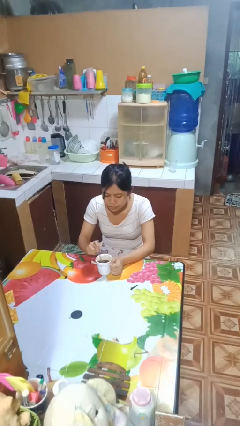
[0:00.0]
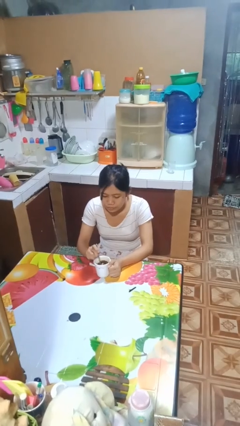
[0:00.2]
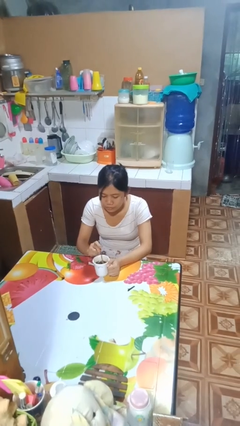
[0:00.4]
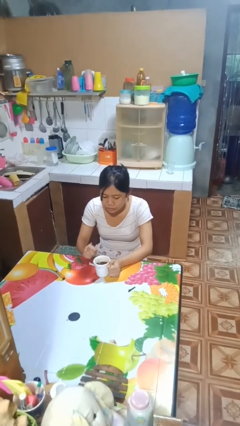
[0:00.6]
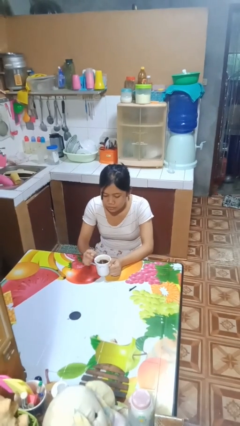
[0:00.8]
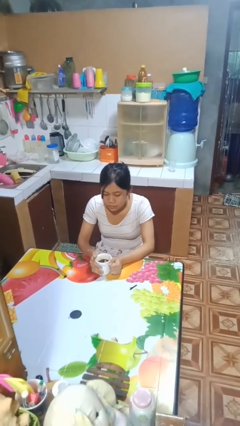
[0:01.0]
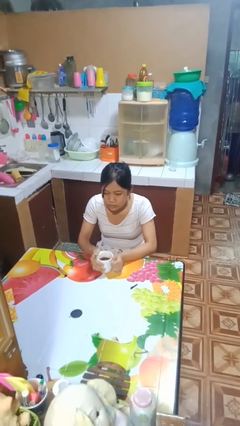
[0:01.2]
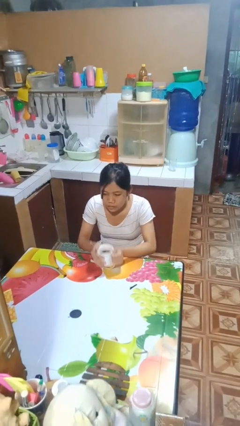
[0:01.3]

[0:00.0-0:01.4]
person stirs mug

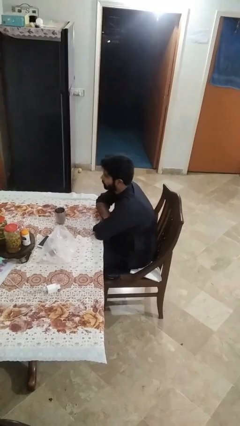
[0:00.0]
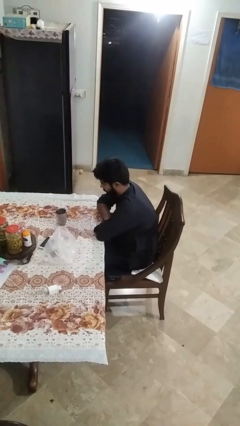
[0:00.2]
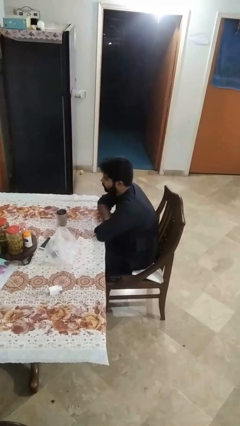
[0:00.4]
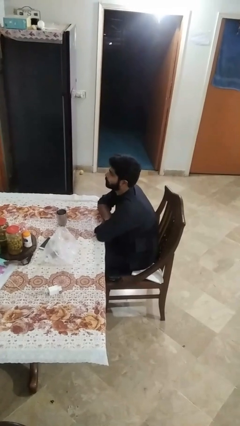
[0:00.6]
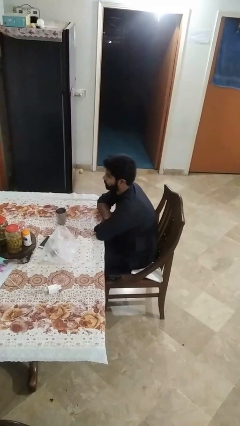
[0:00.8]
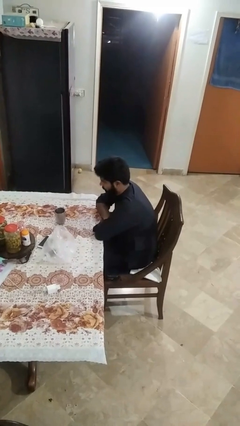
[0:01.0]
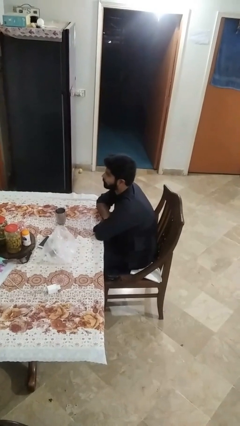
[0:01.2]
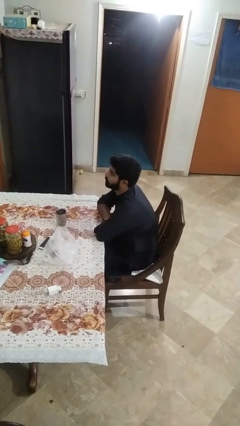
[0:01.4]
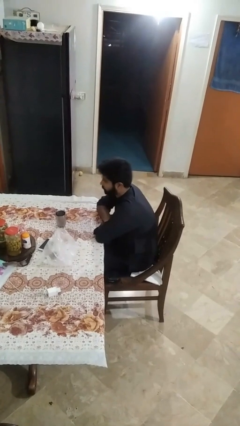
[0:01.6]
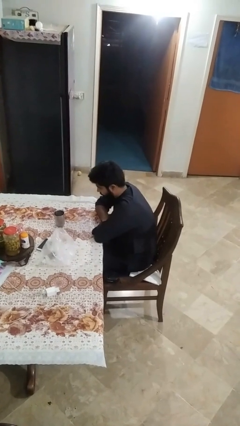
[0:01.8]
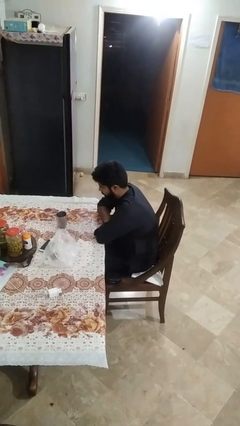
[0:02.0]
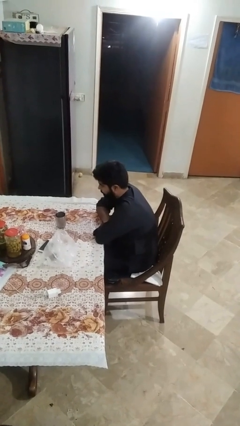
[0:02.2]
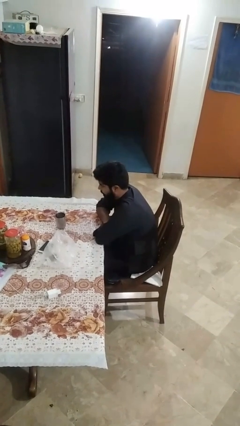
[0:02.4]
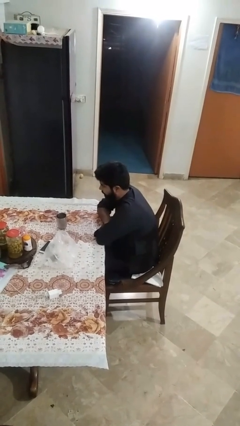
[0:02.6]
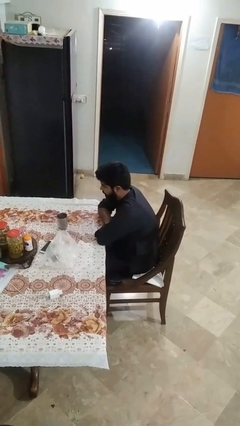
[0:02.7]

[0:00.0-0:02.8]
person nods head

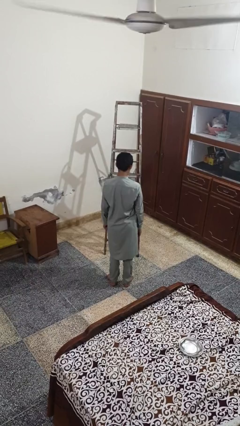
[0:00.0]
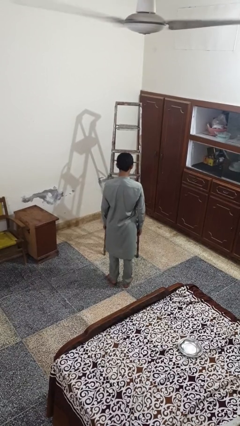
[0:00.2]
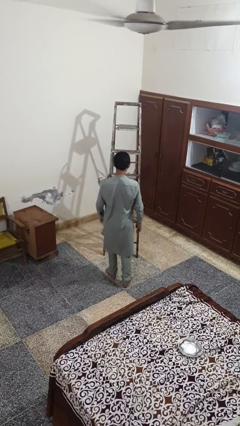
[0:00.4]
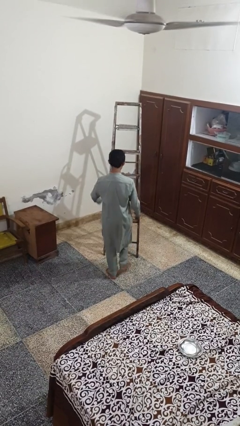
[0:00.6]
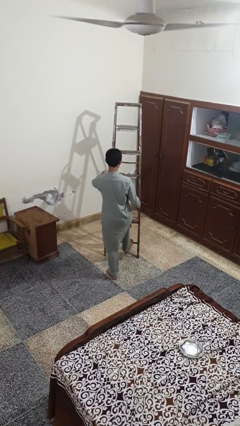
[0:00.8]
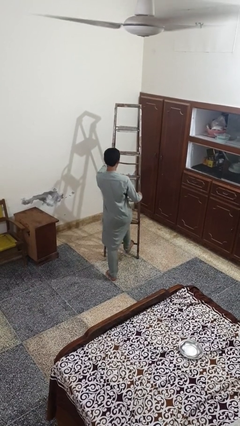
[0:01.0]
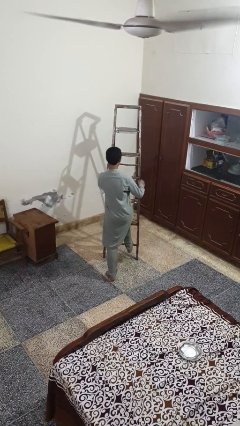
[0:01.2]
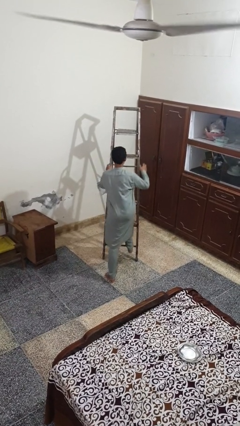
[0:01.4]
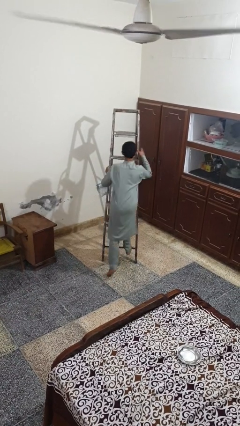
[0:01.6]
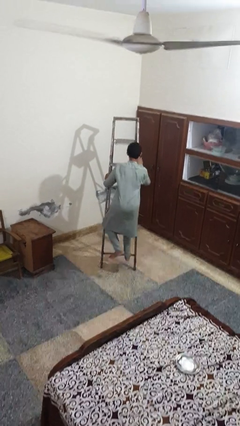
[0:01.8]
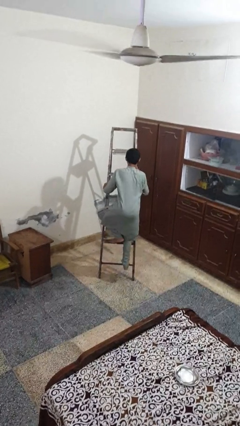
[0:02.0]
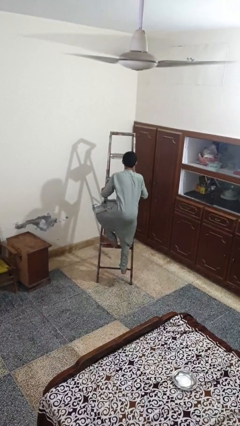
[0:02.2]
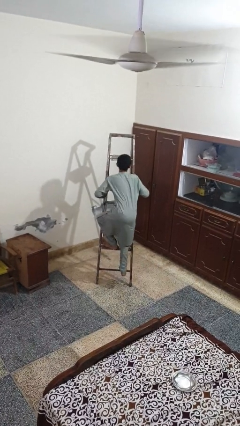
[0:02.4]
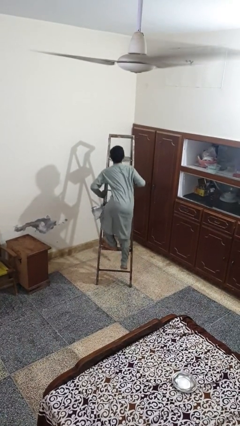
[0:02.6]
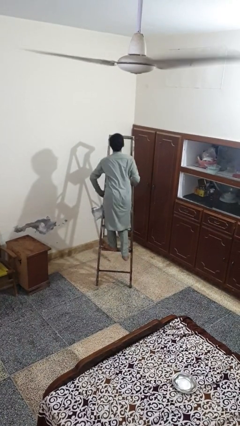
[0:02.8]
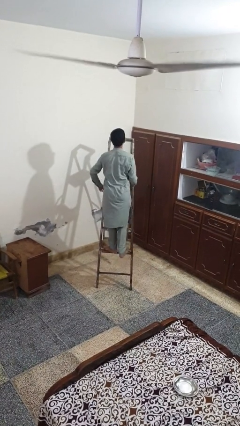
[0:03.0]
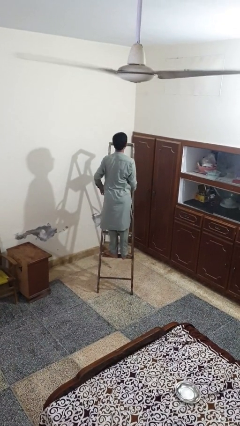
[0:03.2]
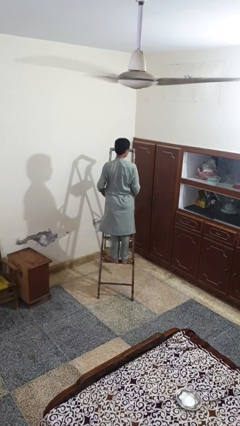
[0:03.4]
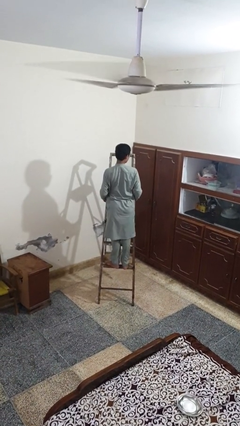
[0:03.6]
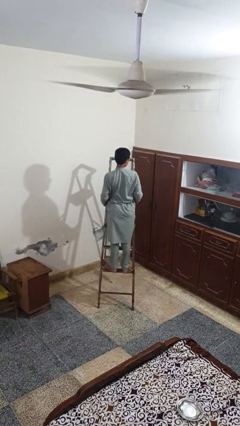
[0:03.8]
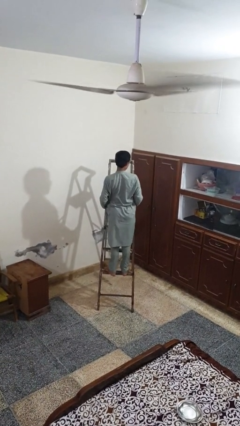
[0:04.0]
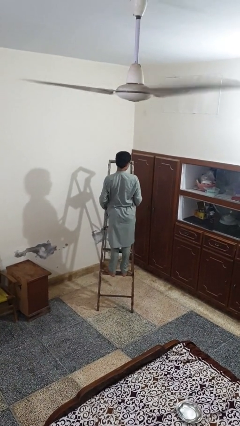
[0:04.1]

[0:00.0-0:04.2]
person climbs up ladder

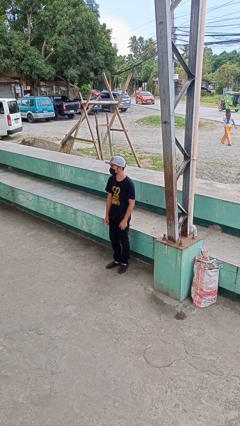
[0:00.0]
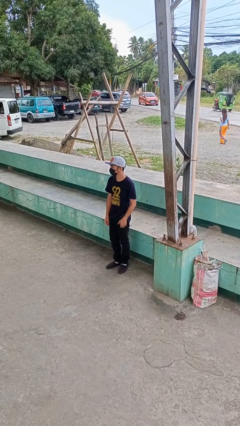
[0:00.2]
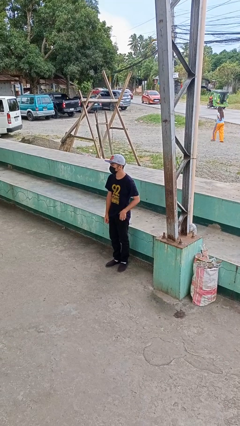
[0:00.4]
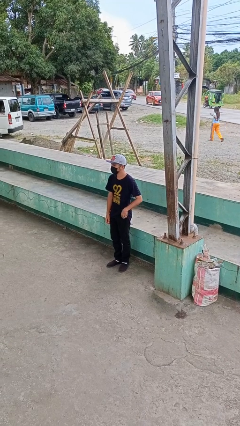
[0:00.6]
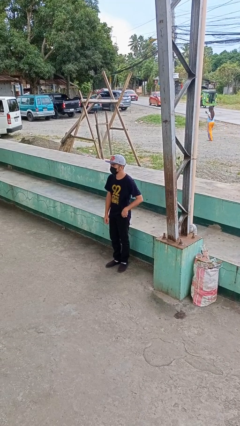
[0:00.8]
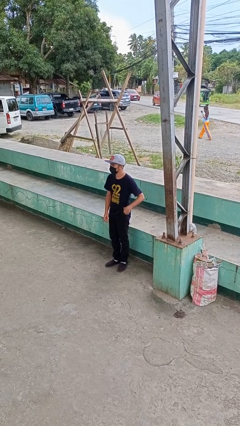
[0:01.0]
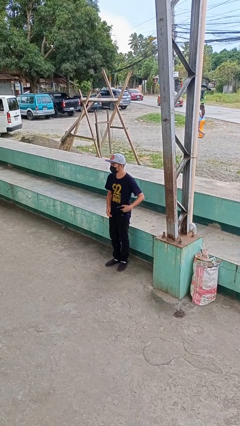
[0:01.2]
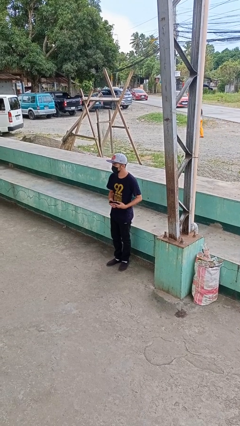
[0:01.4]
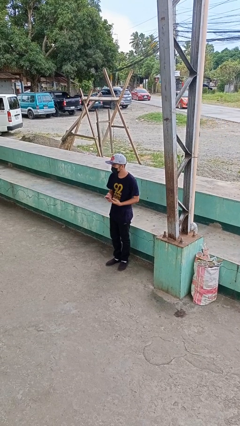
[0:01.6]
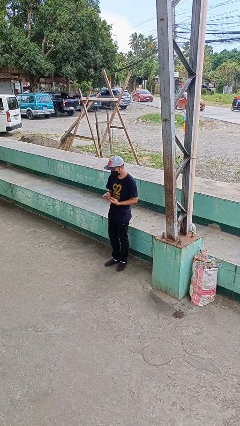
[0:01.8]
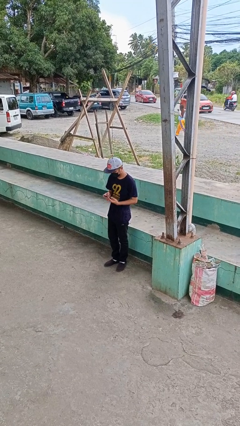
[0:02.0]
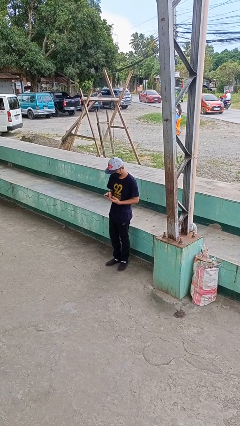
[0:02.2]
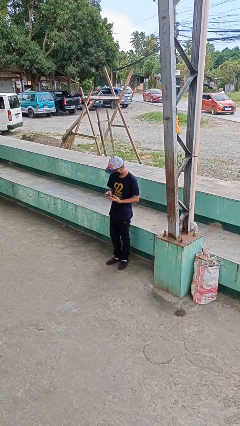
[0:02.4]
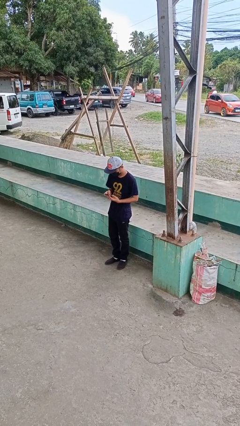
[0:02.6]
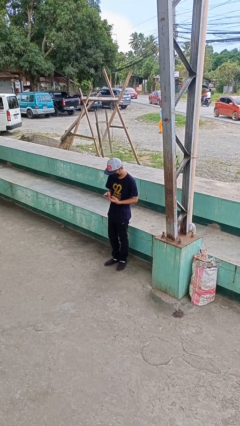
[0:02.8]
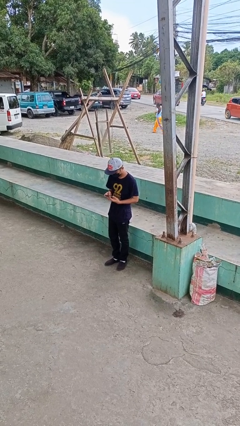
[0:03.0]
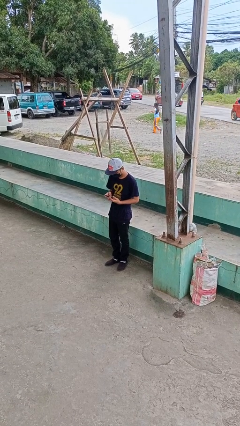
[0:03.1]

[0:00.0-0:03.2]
person takes phone from pocket

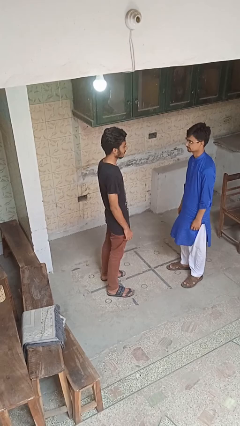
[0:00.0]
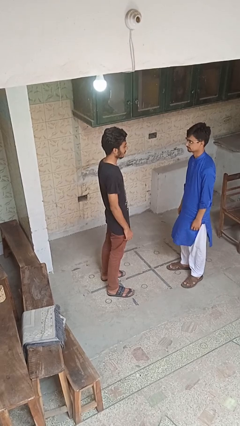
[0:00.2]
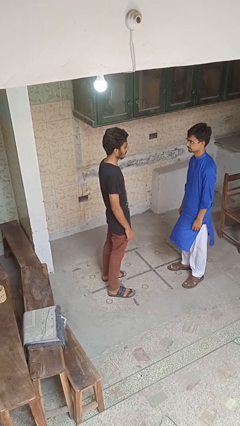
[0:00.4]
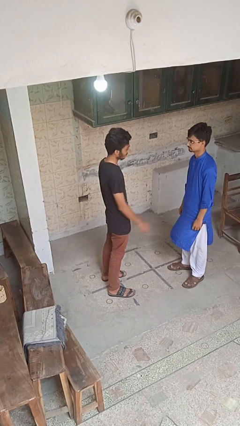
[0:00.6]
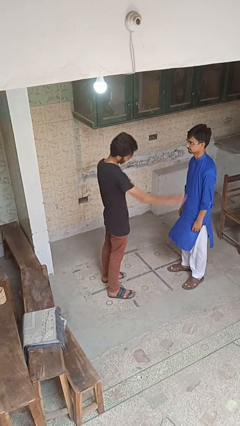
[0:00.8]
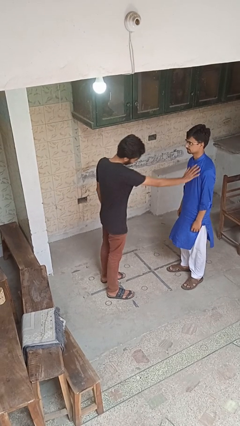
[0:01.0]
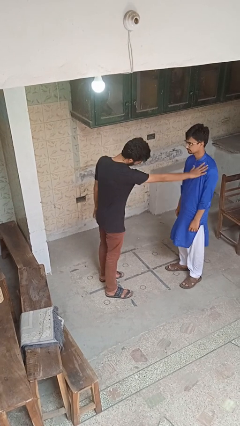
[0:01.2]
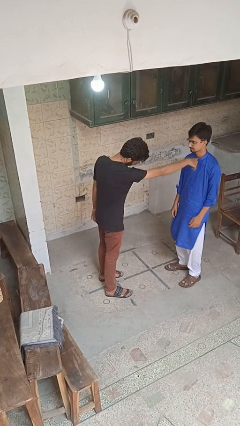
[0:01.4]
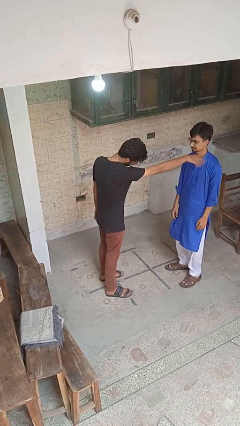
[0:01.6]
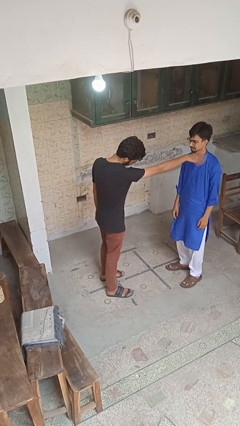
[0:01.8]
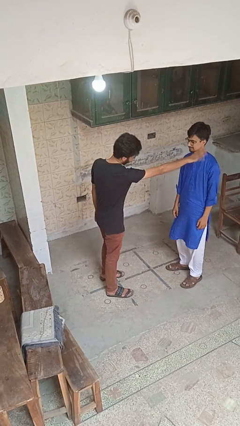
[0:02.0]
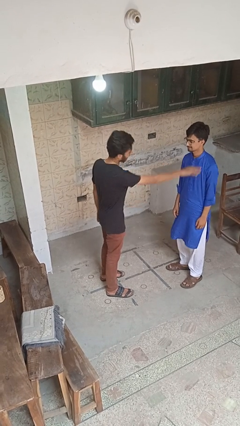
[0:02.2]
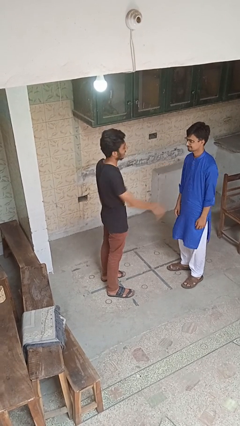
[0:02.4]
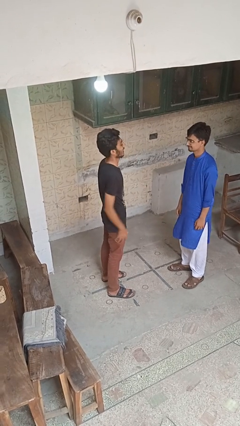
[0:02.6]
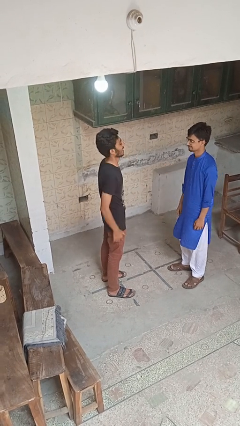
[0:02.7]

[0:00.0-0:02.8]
person shoves person

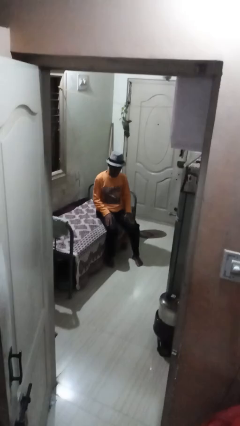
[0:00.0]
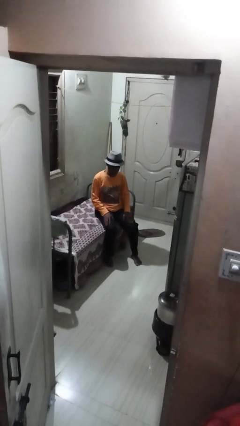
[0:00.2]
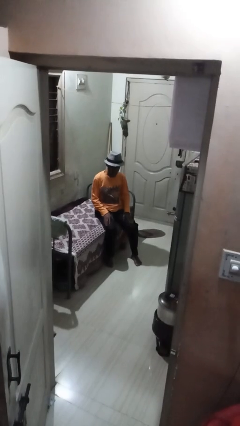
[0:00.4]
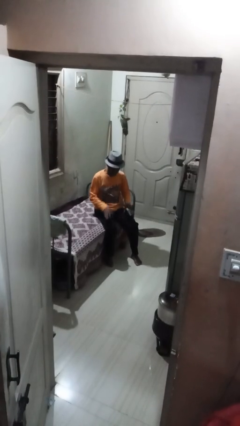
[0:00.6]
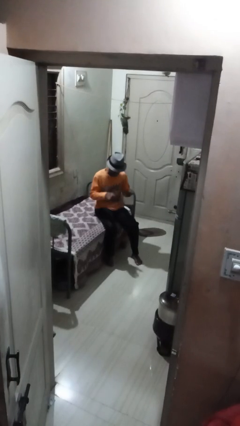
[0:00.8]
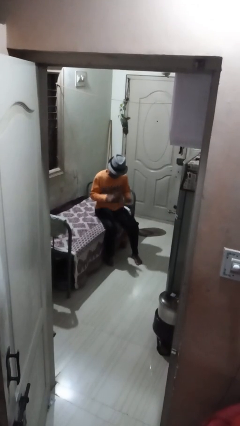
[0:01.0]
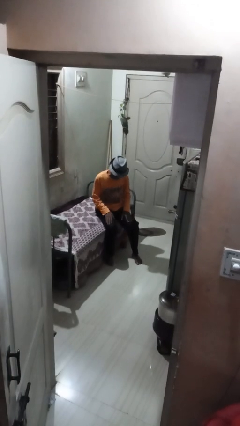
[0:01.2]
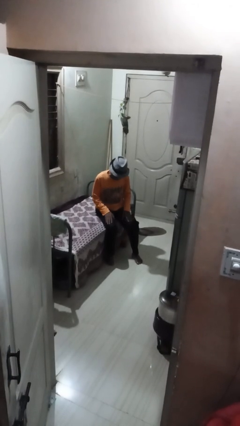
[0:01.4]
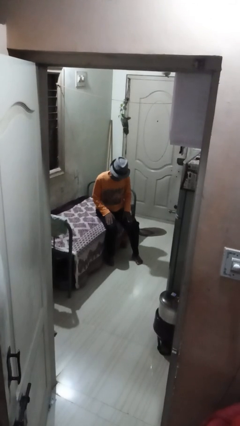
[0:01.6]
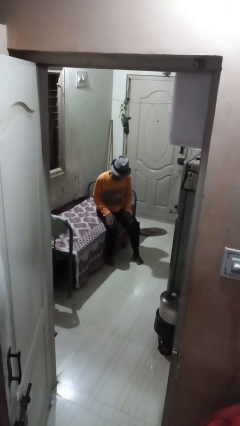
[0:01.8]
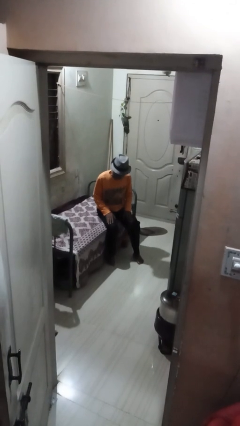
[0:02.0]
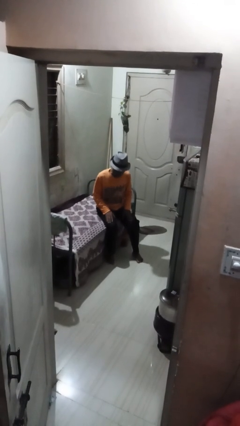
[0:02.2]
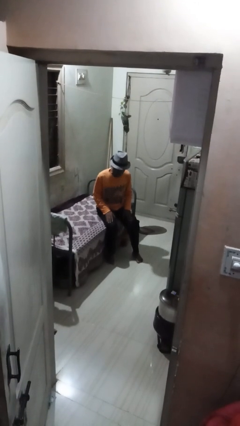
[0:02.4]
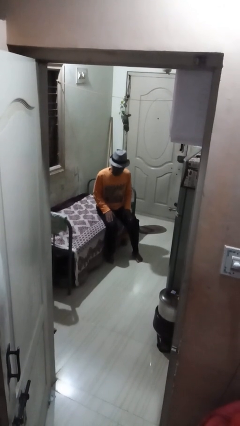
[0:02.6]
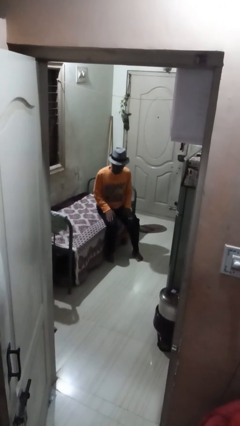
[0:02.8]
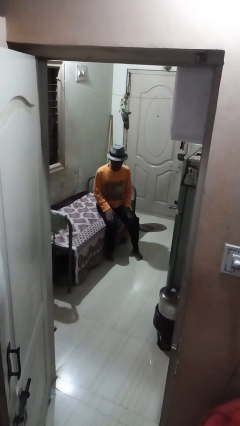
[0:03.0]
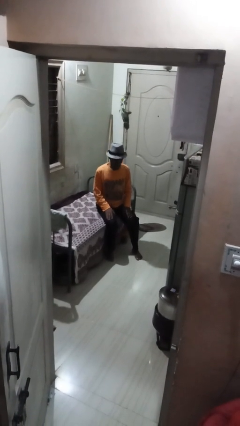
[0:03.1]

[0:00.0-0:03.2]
person slaps hands on thighs
